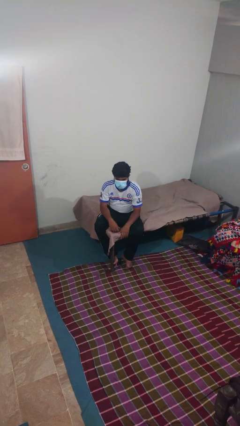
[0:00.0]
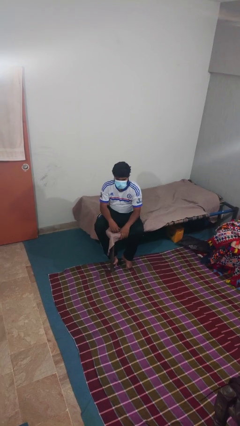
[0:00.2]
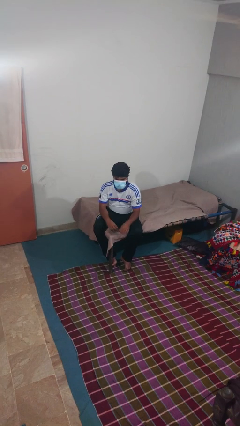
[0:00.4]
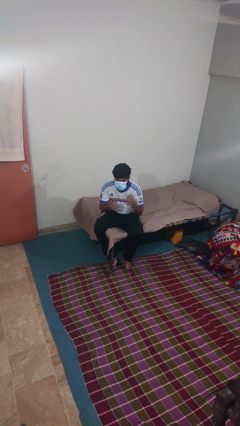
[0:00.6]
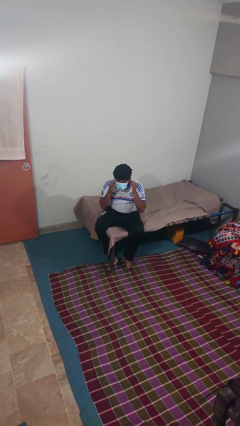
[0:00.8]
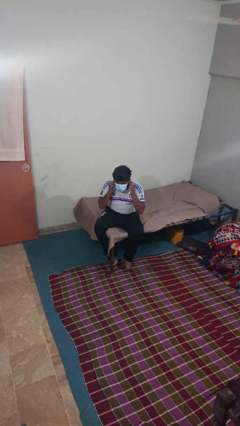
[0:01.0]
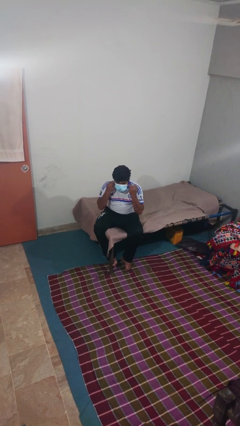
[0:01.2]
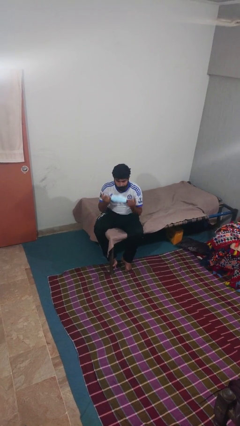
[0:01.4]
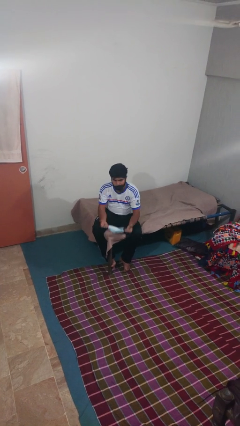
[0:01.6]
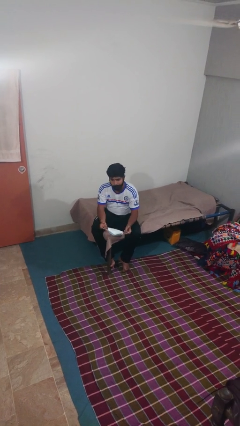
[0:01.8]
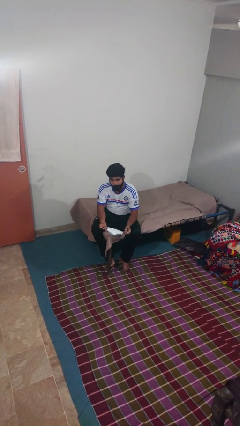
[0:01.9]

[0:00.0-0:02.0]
person takes off facemask

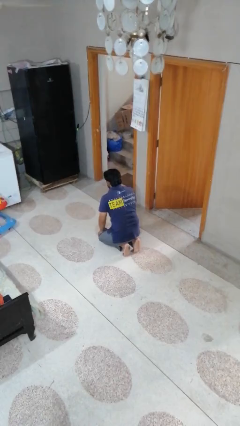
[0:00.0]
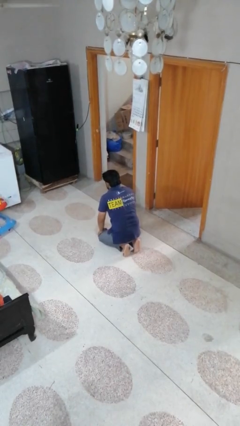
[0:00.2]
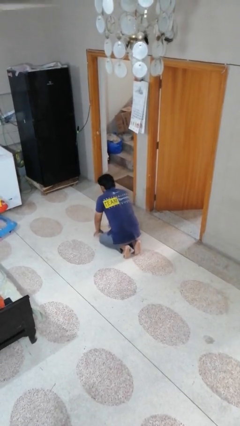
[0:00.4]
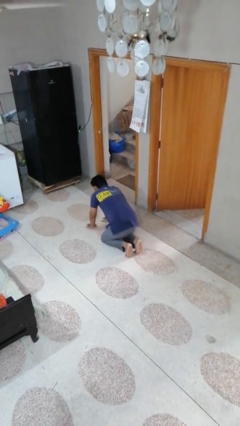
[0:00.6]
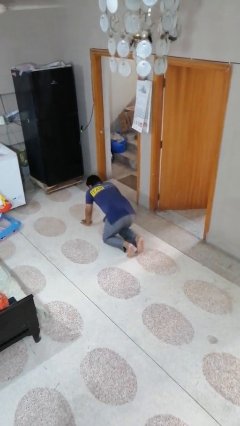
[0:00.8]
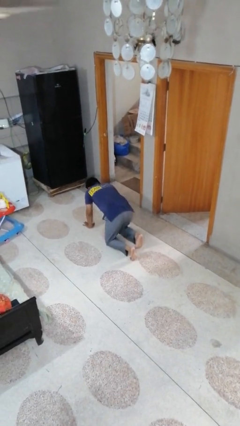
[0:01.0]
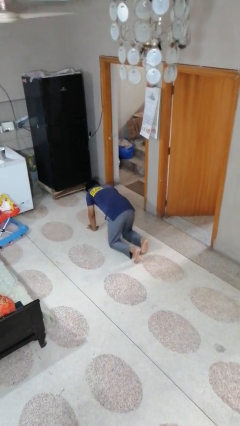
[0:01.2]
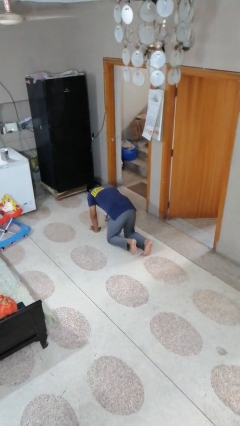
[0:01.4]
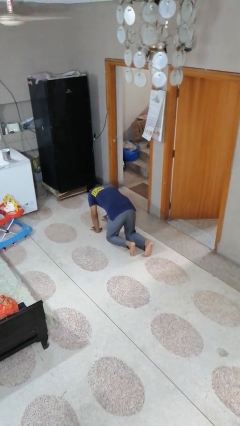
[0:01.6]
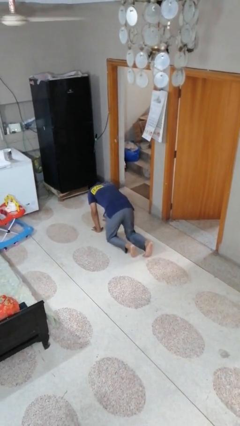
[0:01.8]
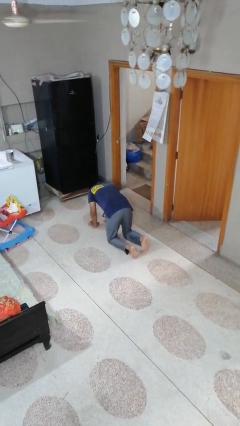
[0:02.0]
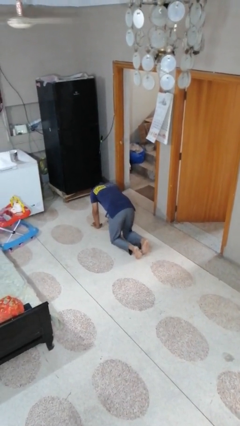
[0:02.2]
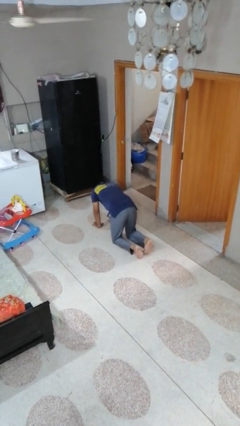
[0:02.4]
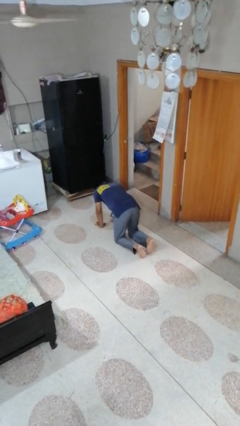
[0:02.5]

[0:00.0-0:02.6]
person crawls

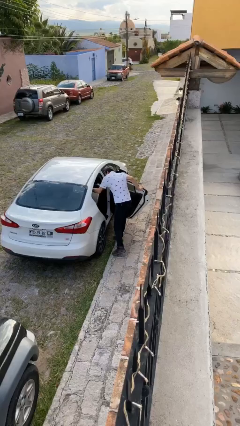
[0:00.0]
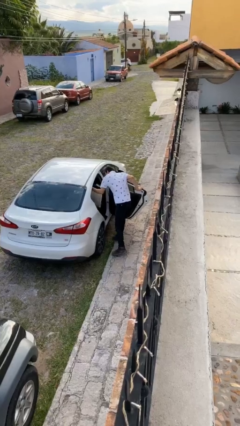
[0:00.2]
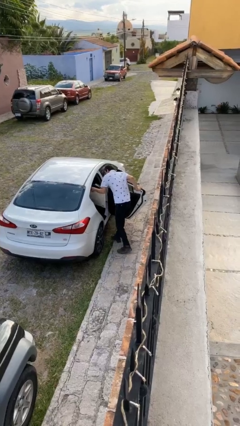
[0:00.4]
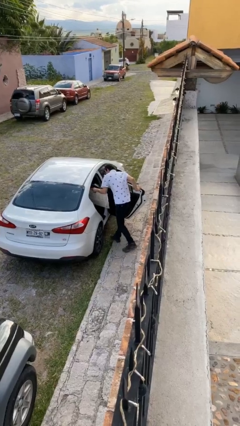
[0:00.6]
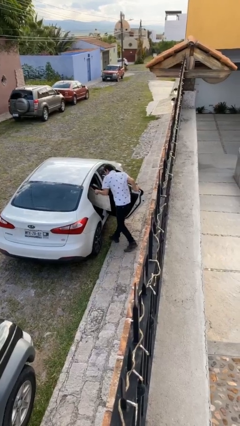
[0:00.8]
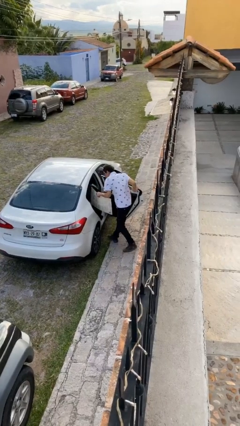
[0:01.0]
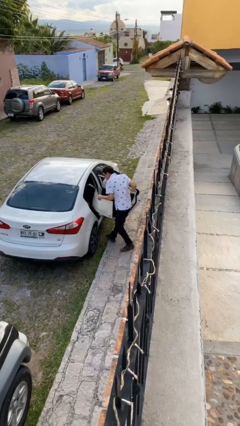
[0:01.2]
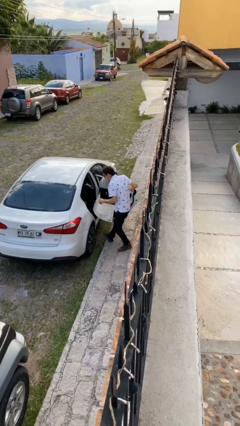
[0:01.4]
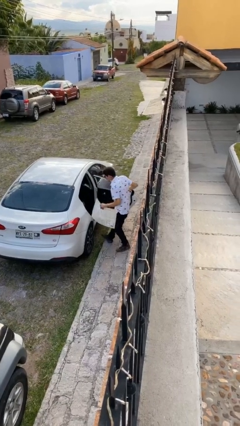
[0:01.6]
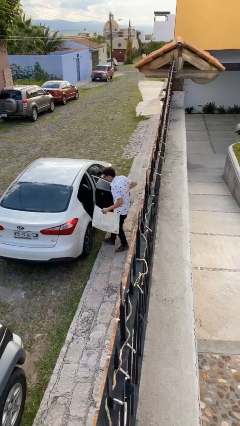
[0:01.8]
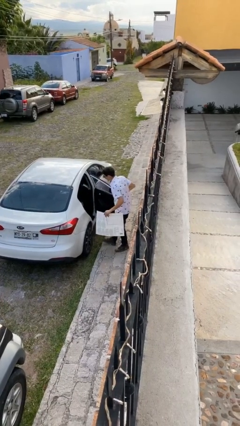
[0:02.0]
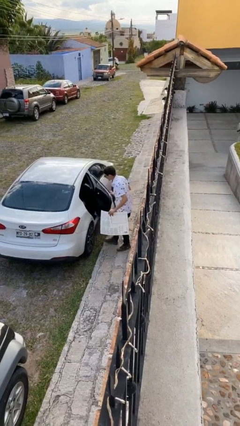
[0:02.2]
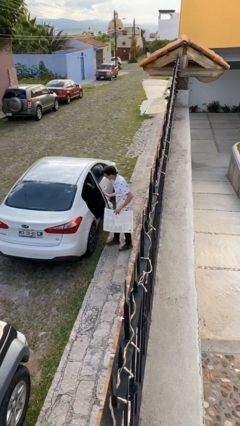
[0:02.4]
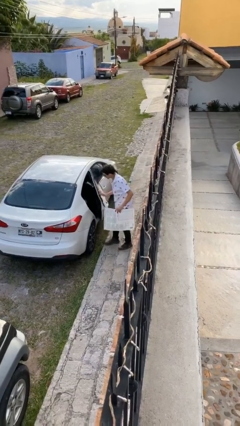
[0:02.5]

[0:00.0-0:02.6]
person unloads car

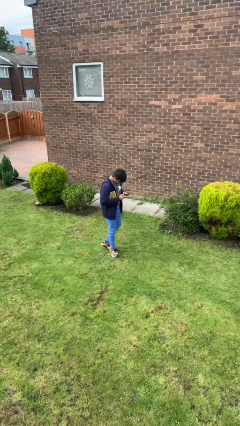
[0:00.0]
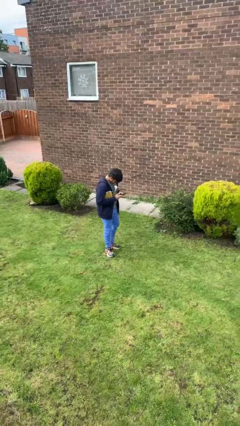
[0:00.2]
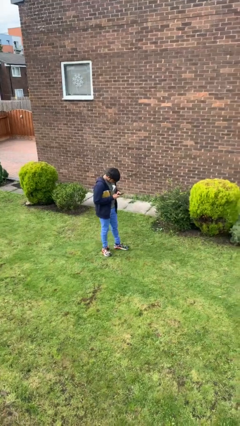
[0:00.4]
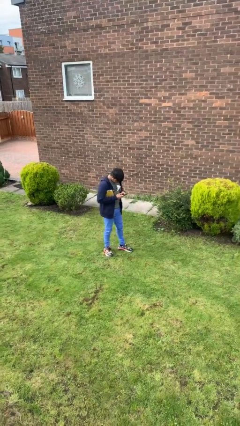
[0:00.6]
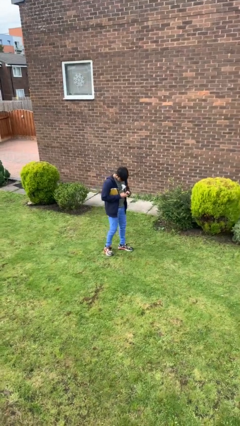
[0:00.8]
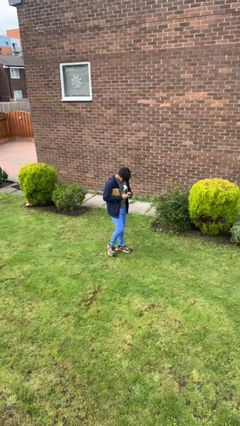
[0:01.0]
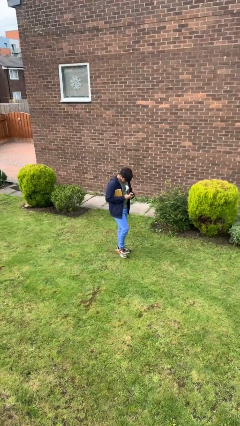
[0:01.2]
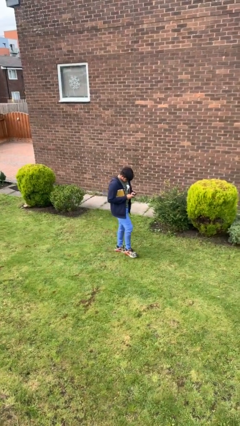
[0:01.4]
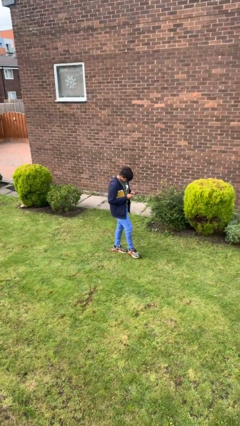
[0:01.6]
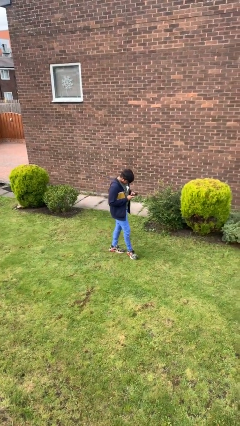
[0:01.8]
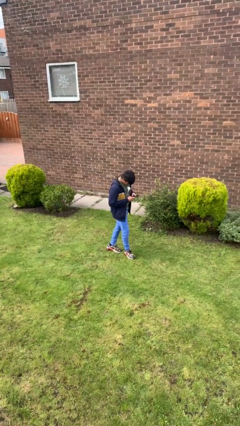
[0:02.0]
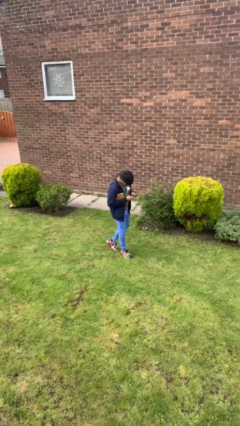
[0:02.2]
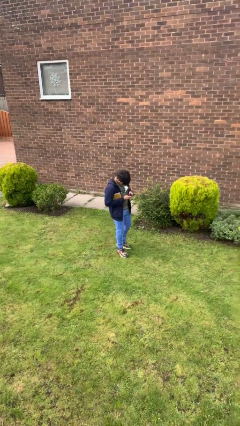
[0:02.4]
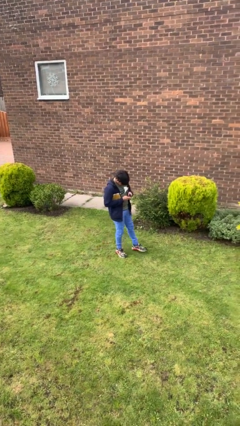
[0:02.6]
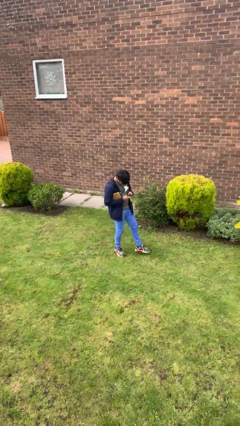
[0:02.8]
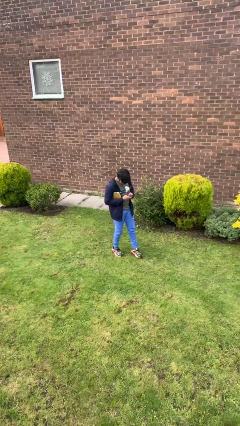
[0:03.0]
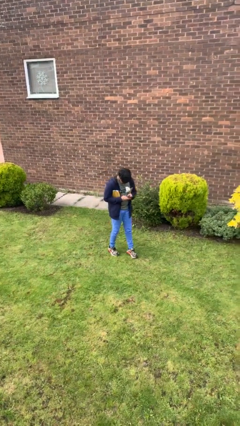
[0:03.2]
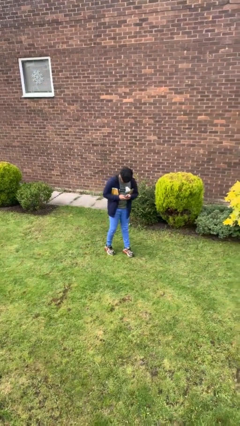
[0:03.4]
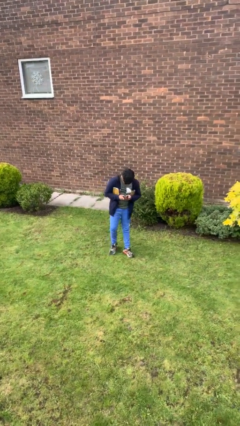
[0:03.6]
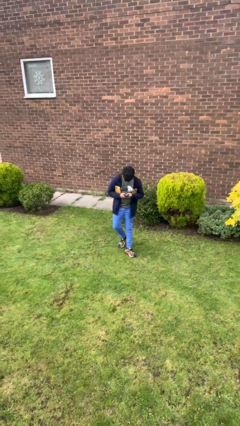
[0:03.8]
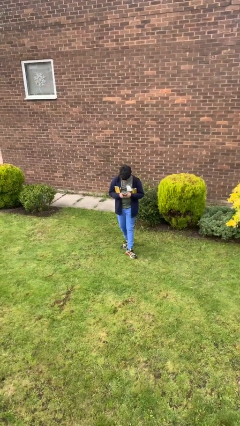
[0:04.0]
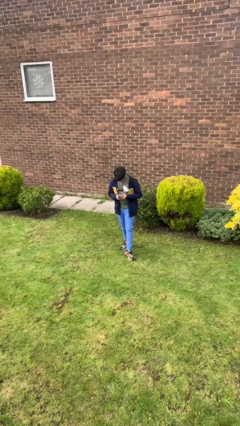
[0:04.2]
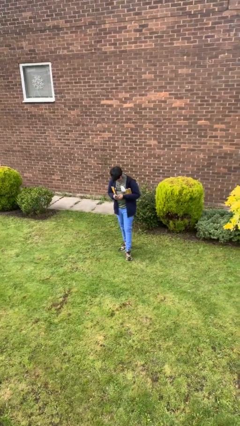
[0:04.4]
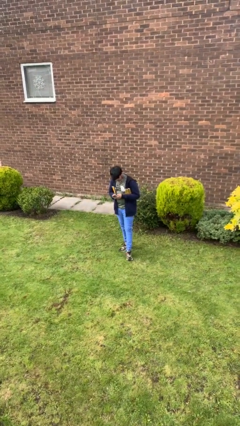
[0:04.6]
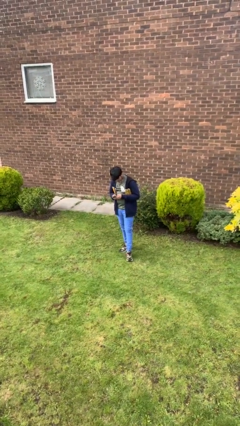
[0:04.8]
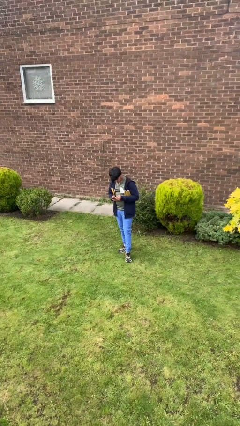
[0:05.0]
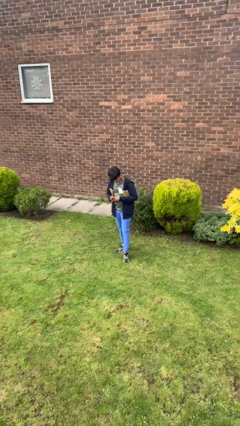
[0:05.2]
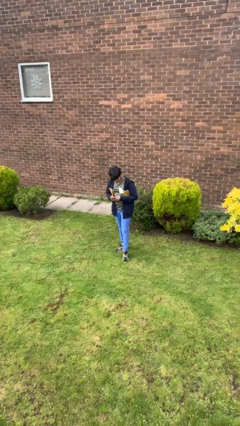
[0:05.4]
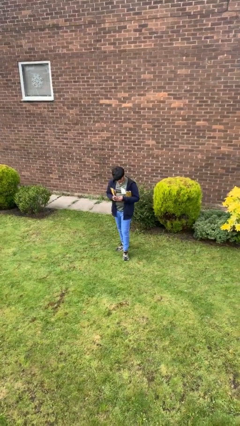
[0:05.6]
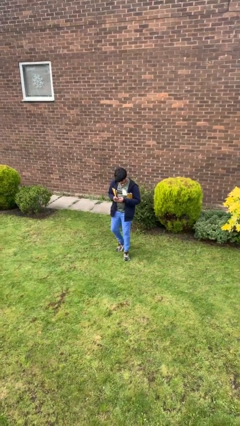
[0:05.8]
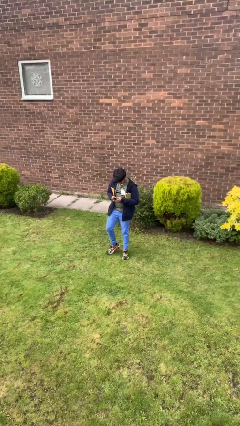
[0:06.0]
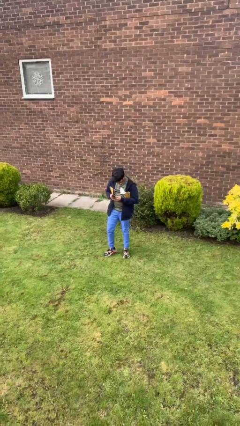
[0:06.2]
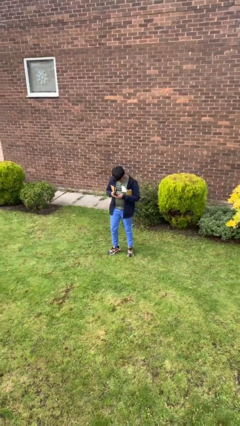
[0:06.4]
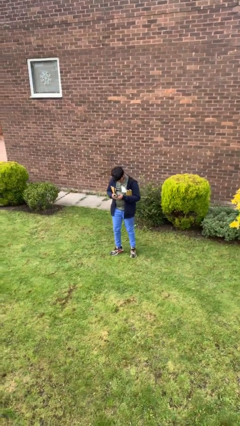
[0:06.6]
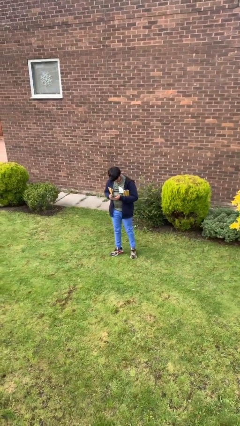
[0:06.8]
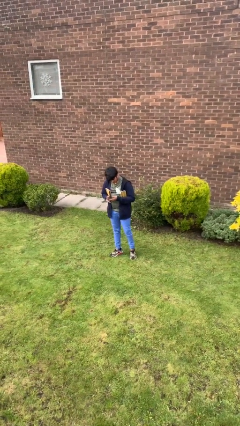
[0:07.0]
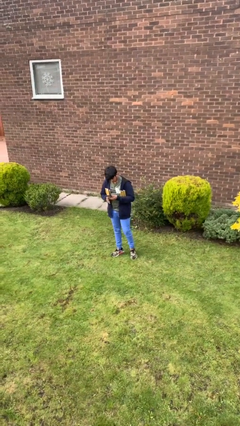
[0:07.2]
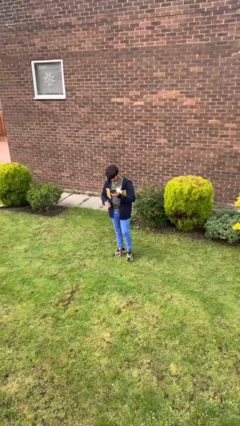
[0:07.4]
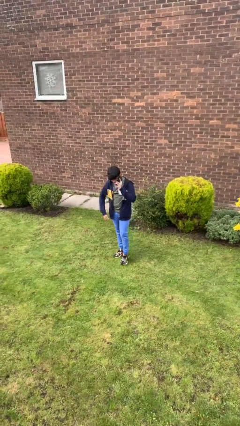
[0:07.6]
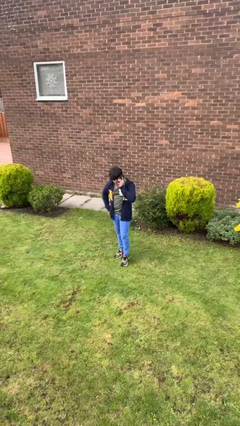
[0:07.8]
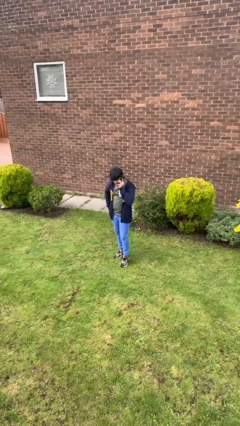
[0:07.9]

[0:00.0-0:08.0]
person texts on phone

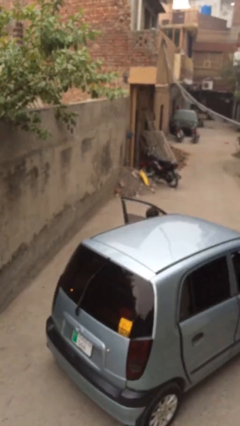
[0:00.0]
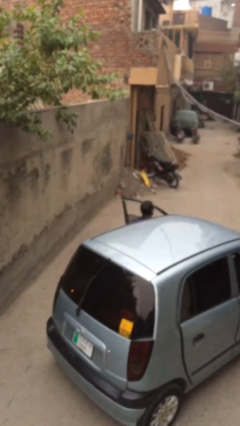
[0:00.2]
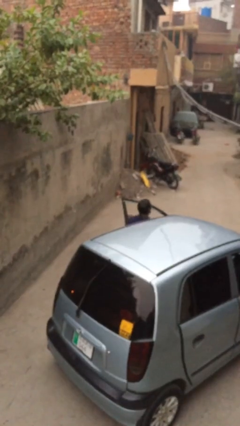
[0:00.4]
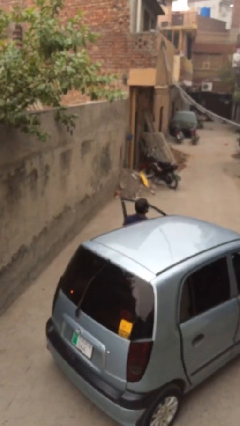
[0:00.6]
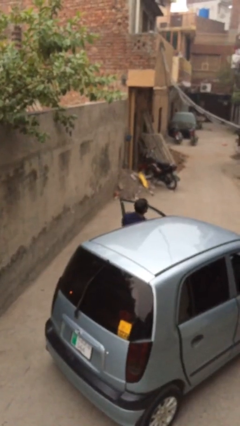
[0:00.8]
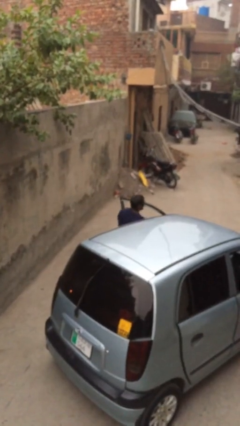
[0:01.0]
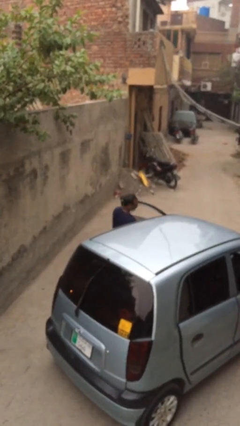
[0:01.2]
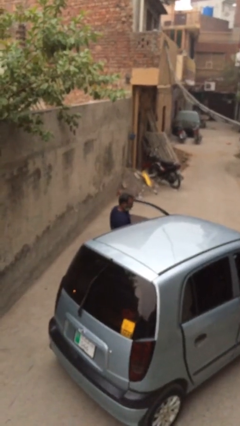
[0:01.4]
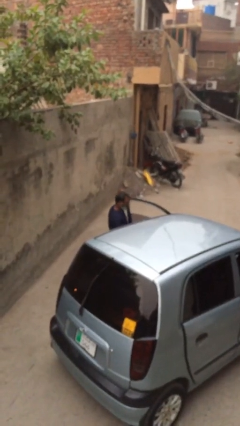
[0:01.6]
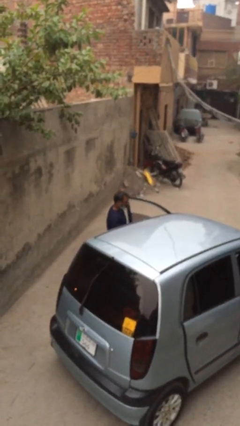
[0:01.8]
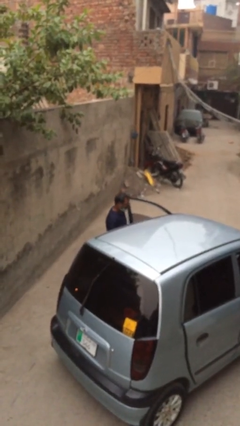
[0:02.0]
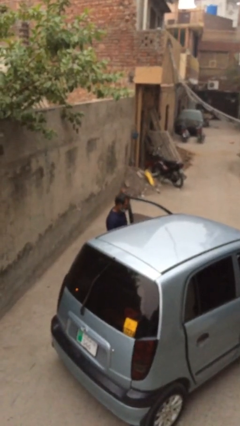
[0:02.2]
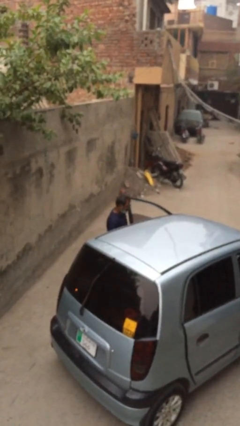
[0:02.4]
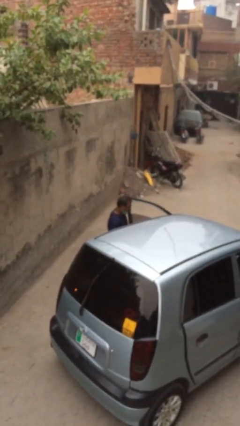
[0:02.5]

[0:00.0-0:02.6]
person exits car
